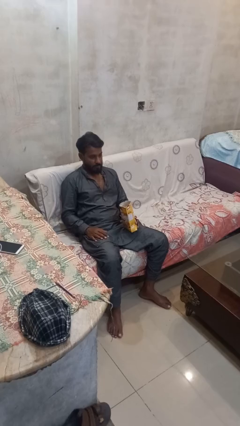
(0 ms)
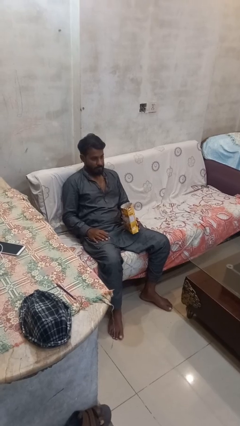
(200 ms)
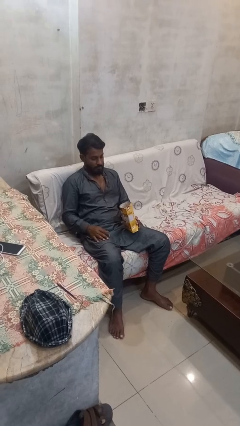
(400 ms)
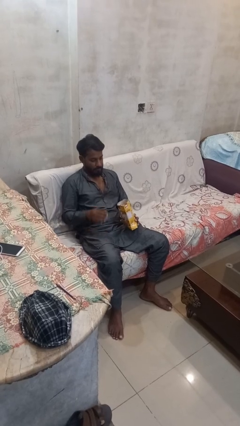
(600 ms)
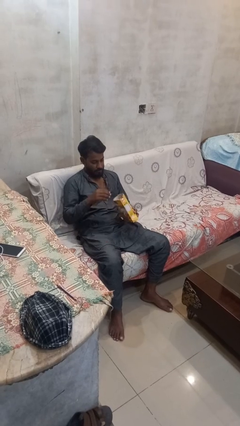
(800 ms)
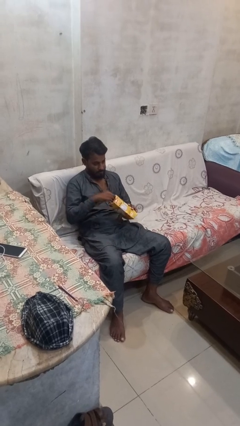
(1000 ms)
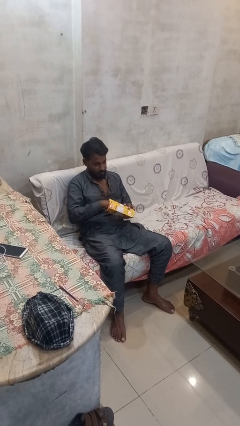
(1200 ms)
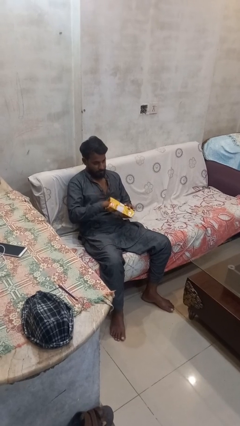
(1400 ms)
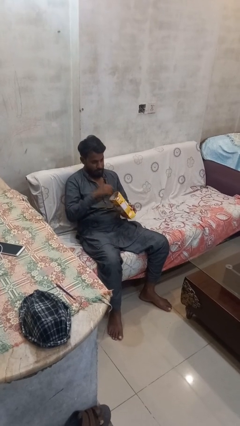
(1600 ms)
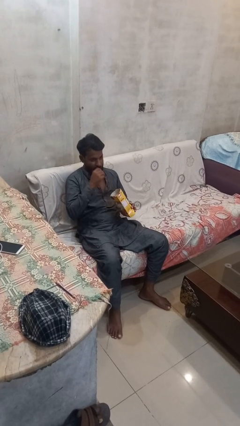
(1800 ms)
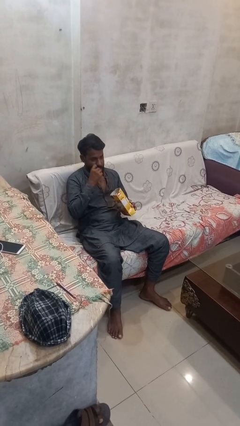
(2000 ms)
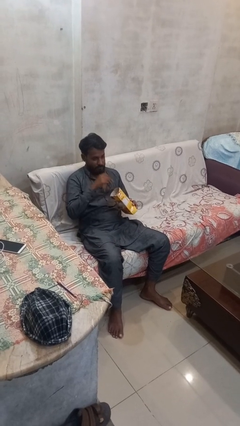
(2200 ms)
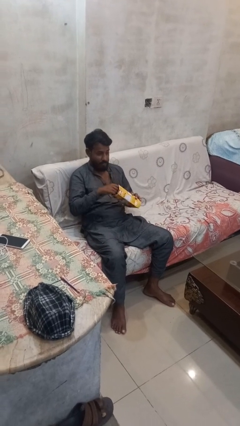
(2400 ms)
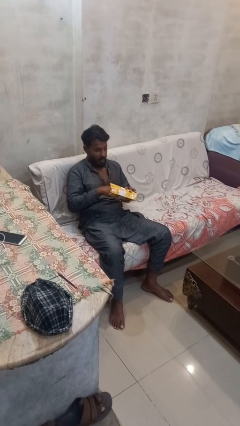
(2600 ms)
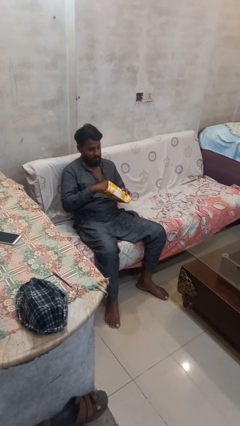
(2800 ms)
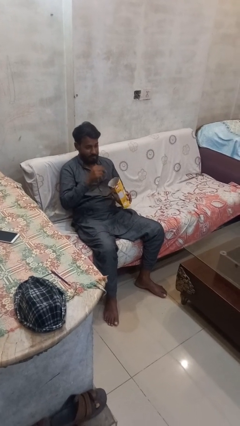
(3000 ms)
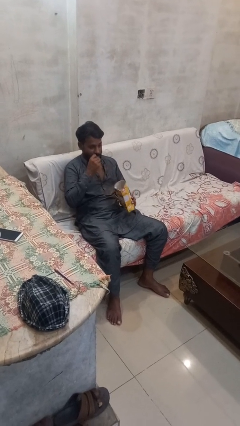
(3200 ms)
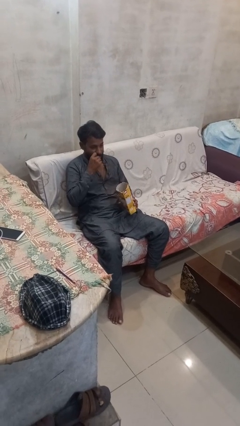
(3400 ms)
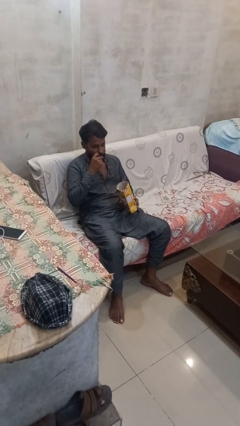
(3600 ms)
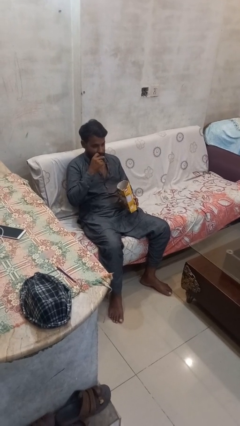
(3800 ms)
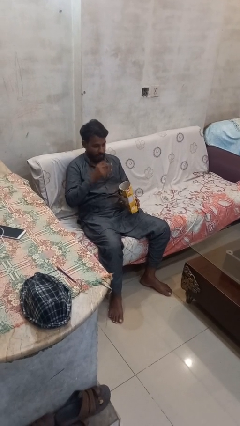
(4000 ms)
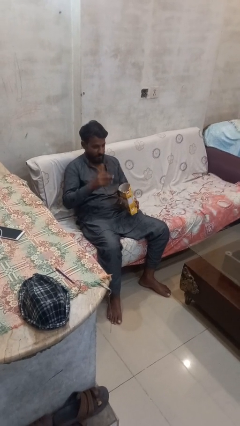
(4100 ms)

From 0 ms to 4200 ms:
person eats snack from bag

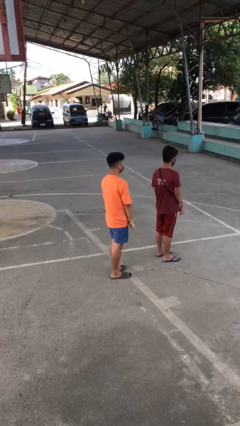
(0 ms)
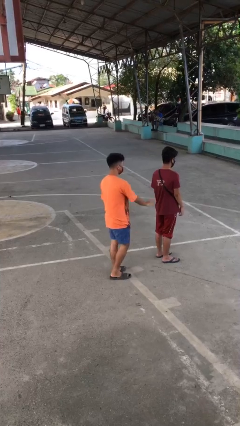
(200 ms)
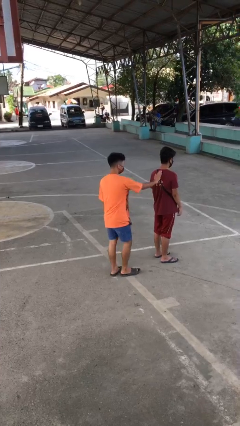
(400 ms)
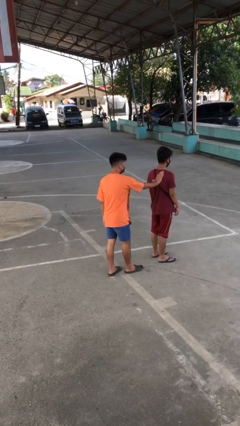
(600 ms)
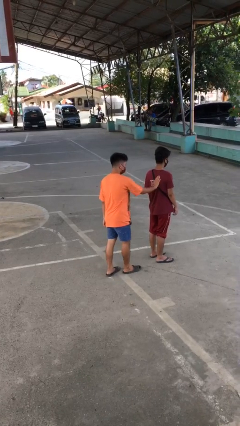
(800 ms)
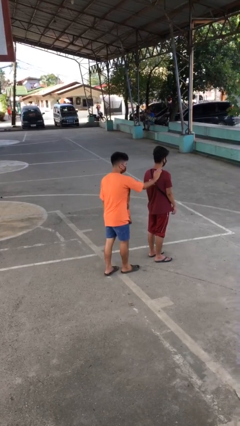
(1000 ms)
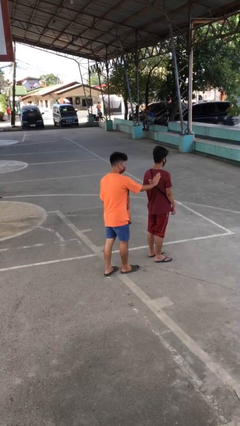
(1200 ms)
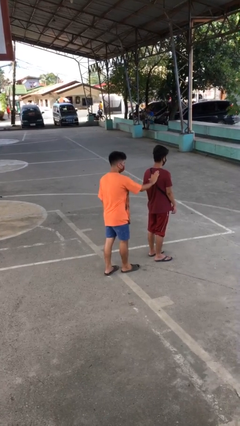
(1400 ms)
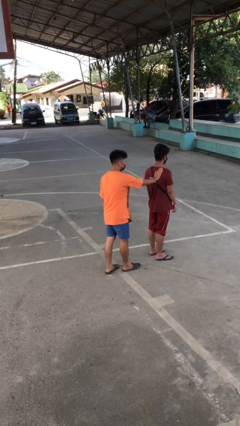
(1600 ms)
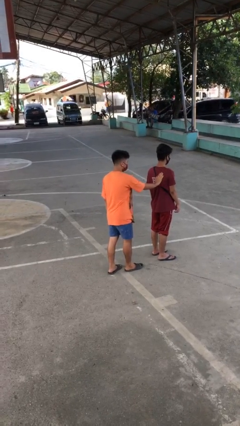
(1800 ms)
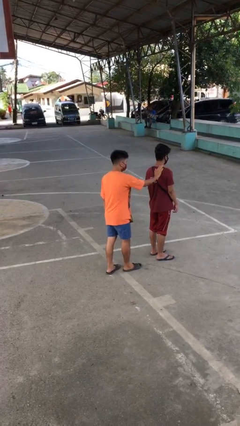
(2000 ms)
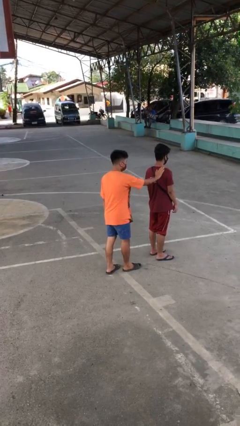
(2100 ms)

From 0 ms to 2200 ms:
person touches back of person

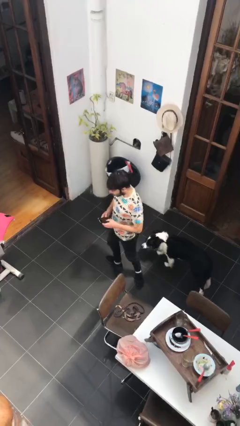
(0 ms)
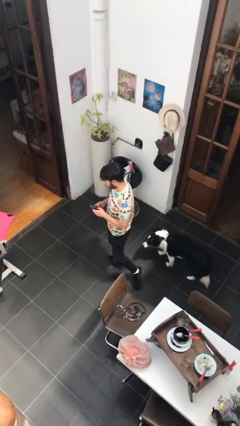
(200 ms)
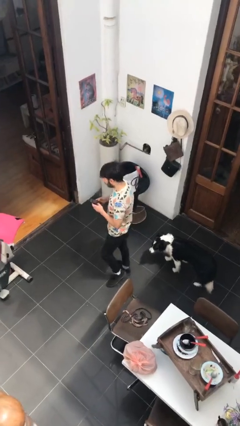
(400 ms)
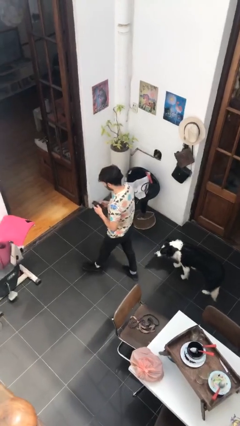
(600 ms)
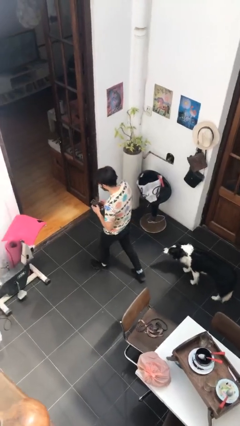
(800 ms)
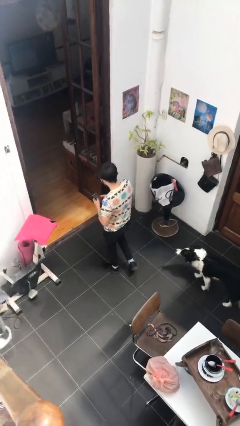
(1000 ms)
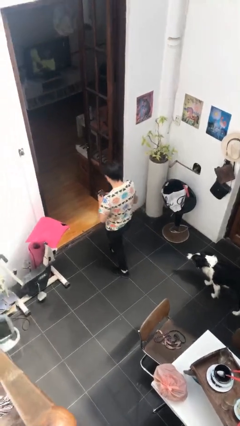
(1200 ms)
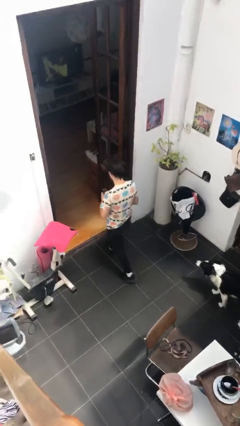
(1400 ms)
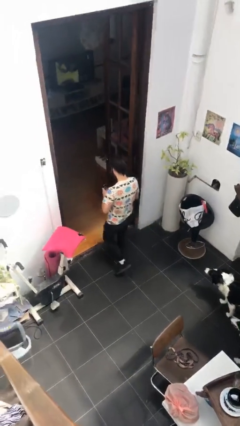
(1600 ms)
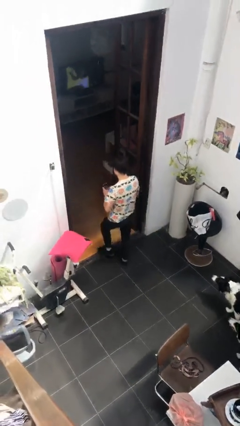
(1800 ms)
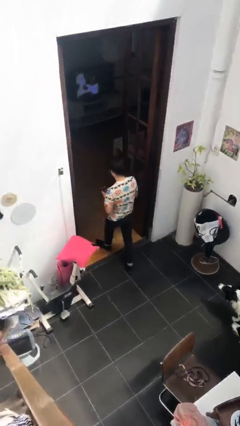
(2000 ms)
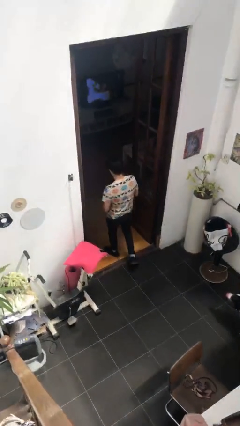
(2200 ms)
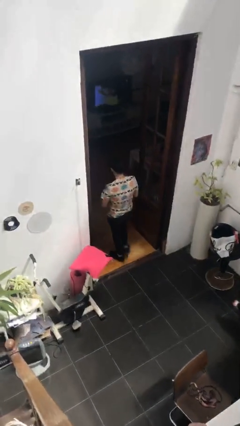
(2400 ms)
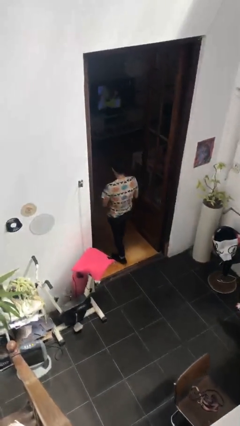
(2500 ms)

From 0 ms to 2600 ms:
person exits scene through structure

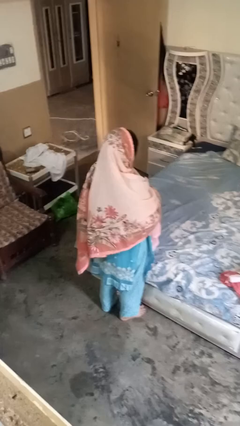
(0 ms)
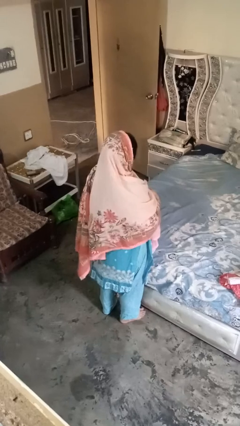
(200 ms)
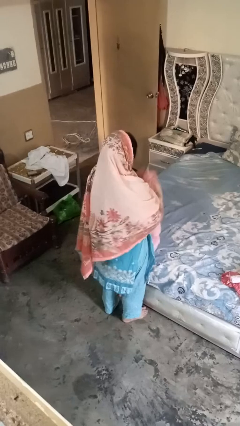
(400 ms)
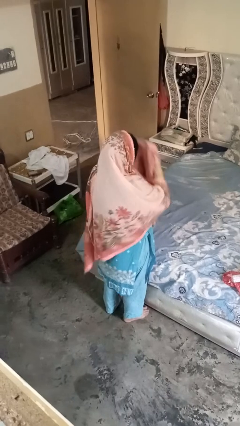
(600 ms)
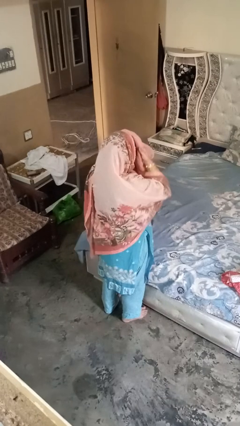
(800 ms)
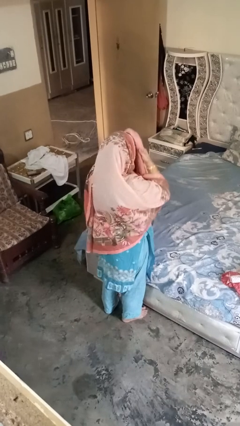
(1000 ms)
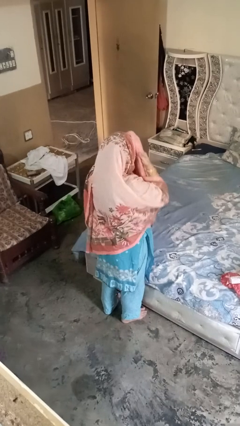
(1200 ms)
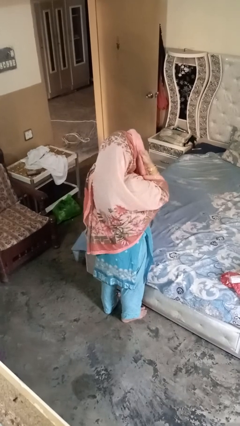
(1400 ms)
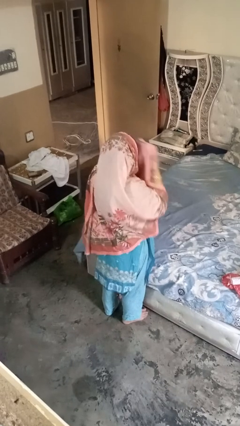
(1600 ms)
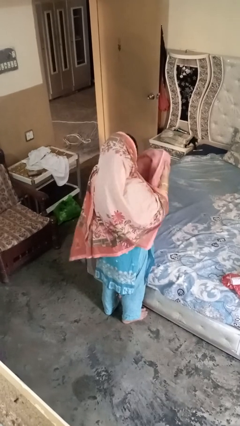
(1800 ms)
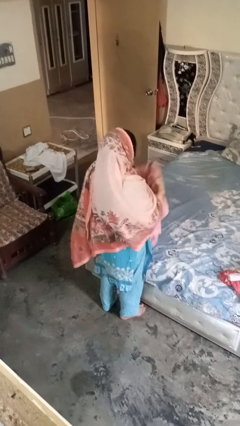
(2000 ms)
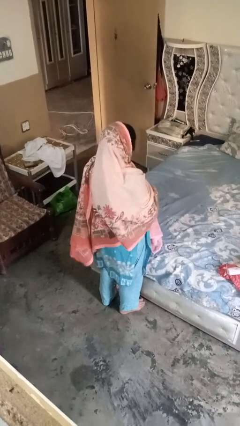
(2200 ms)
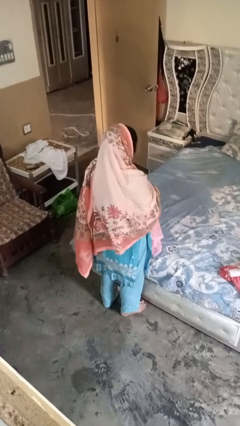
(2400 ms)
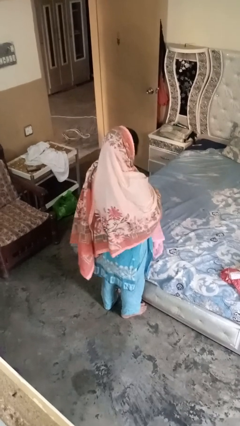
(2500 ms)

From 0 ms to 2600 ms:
person dries hair with towel

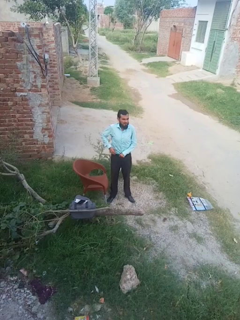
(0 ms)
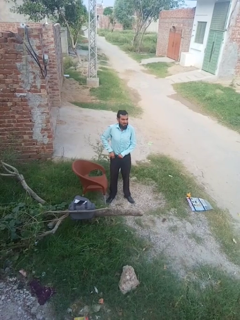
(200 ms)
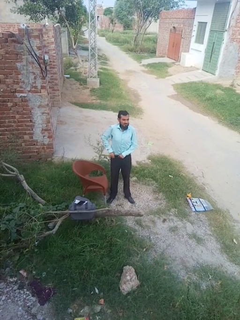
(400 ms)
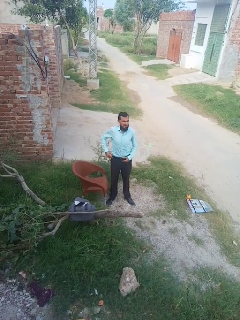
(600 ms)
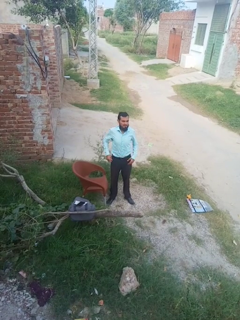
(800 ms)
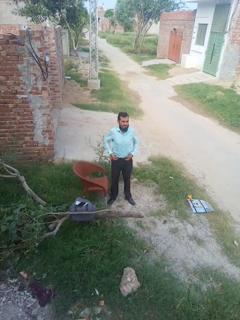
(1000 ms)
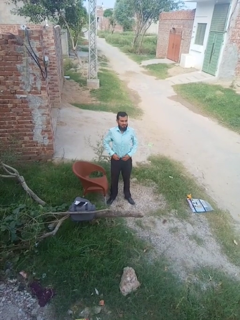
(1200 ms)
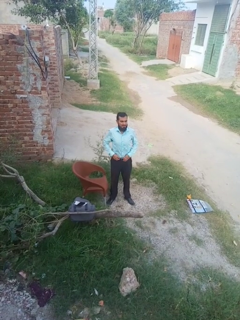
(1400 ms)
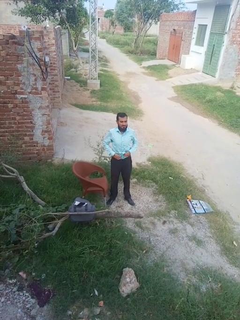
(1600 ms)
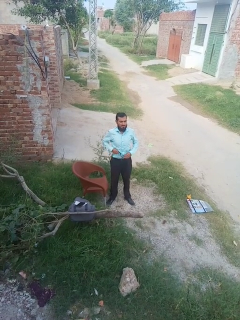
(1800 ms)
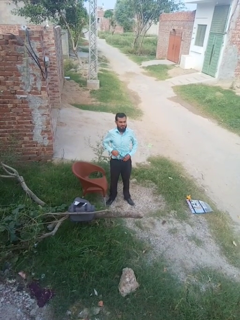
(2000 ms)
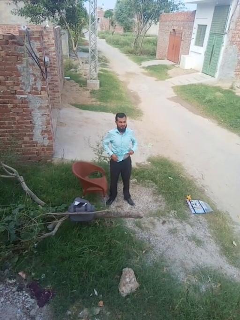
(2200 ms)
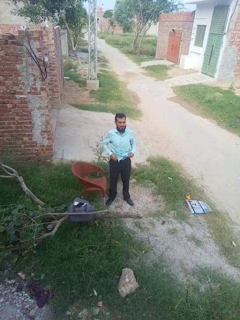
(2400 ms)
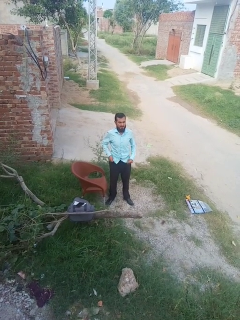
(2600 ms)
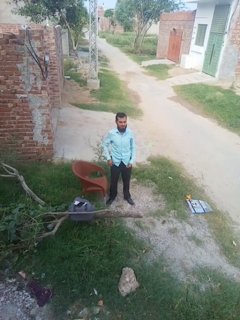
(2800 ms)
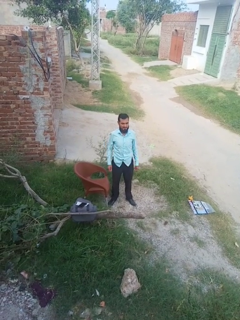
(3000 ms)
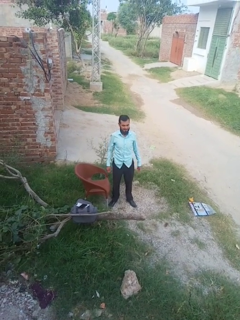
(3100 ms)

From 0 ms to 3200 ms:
person untucks shirt

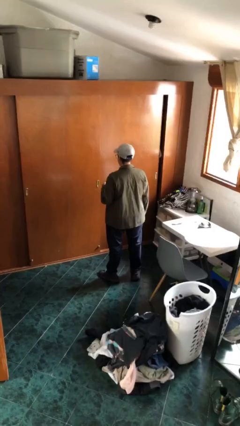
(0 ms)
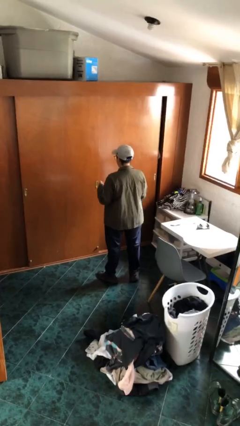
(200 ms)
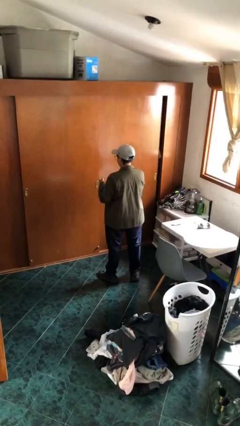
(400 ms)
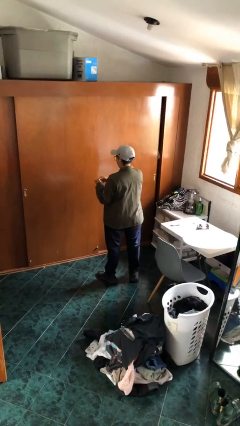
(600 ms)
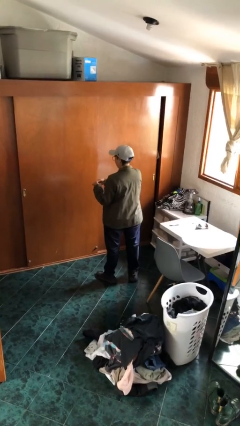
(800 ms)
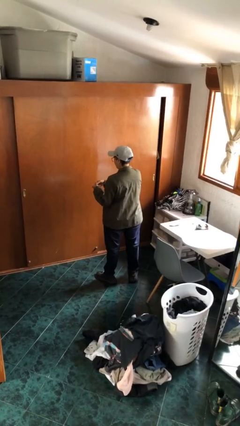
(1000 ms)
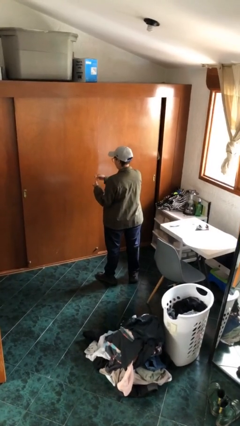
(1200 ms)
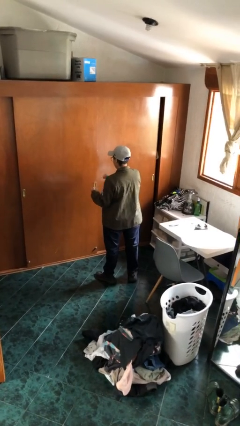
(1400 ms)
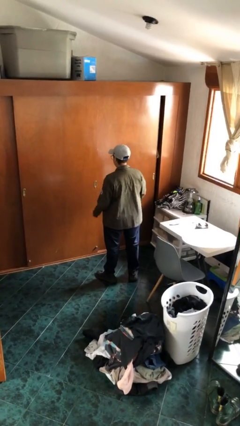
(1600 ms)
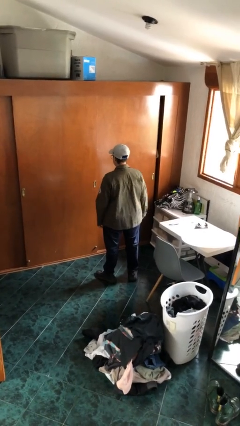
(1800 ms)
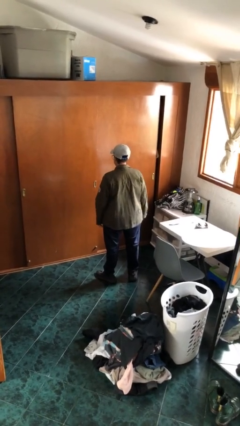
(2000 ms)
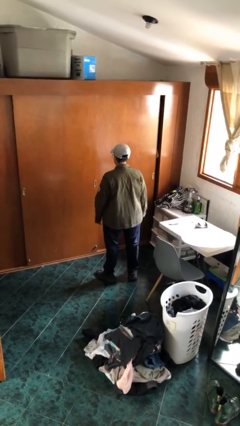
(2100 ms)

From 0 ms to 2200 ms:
person takes off ring

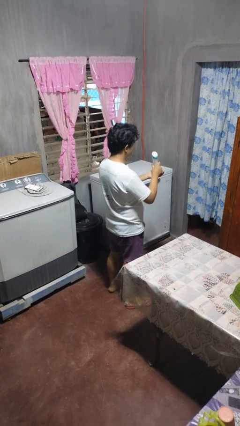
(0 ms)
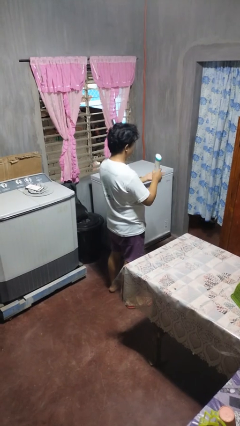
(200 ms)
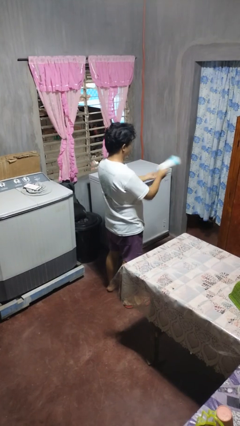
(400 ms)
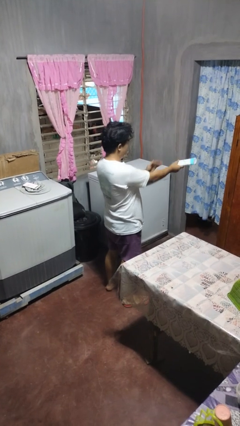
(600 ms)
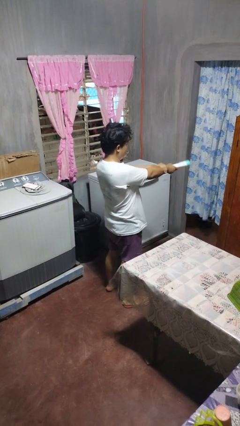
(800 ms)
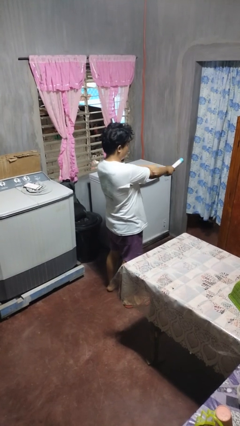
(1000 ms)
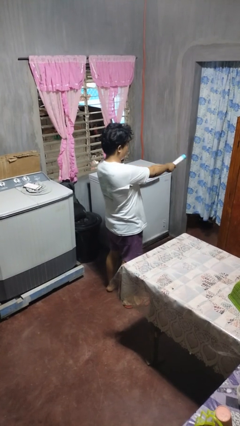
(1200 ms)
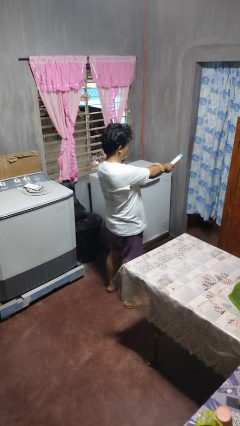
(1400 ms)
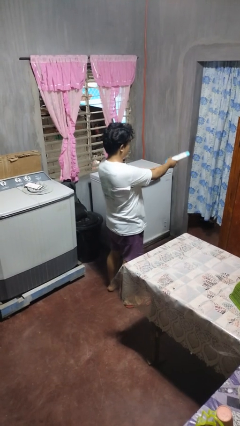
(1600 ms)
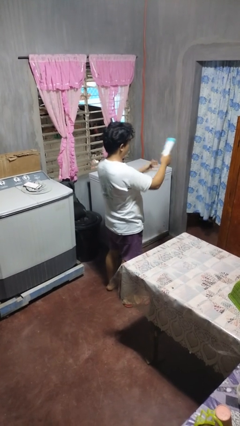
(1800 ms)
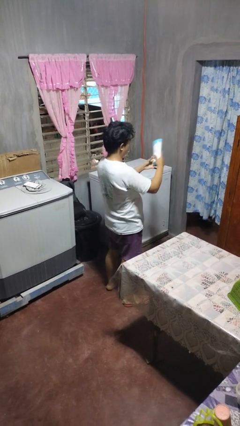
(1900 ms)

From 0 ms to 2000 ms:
person applies sunscreen
